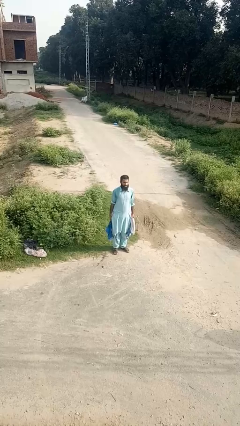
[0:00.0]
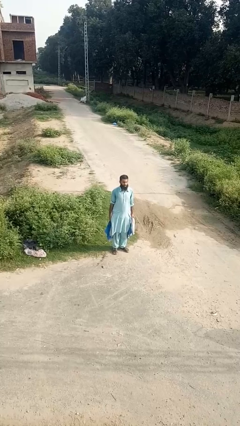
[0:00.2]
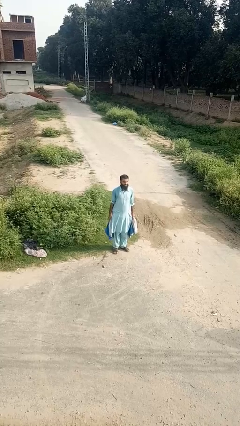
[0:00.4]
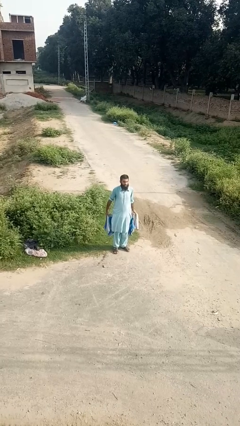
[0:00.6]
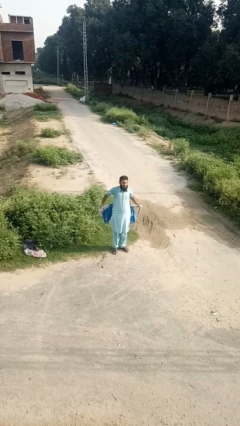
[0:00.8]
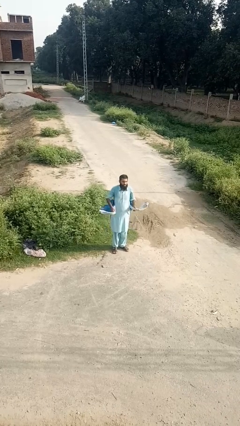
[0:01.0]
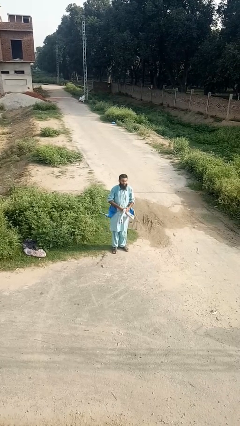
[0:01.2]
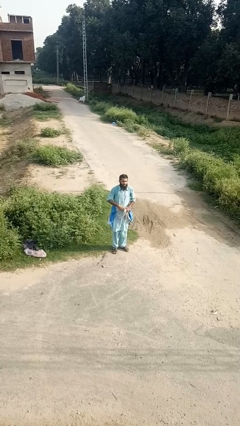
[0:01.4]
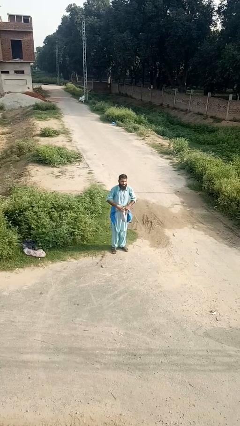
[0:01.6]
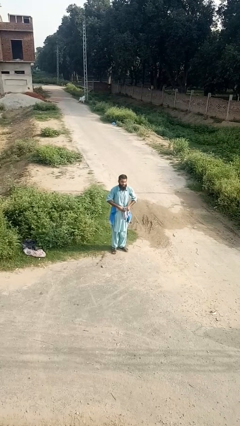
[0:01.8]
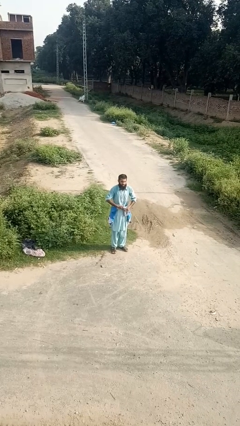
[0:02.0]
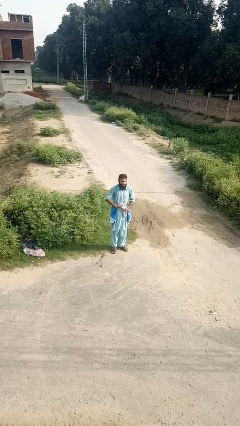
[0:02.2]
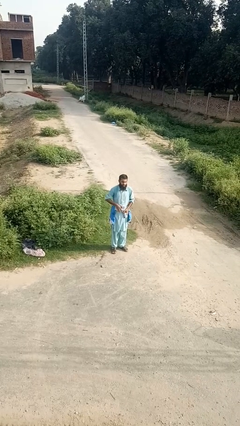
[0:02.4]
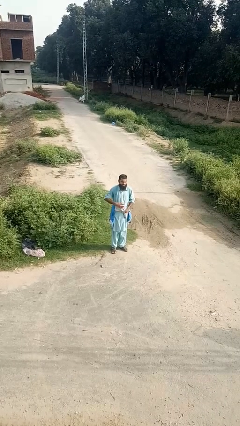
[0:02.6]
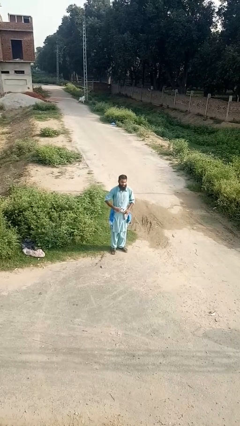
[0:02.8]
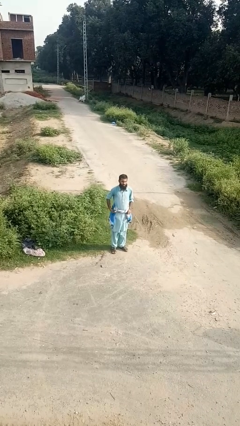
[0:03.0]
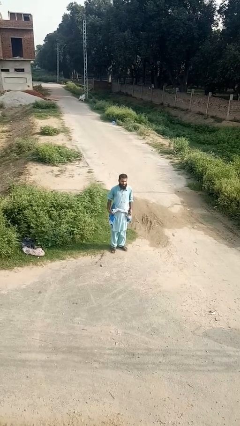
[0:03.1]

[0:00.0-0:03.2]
person ties jacket around waist

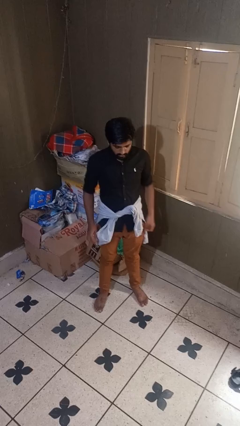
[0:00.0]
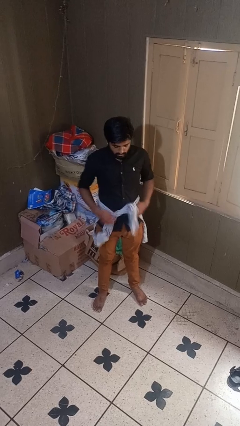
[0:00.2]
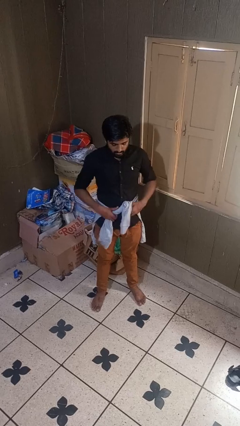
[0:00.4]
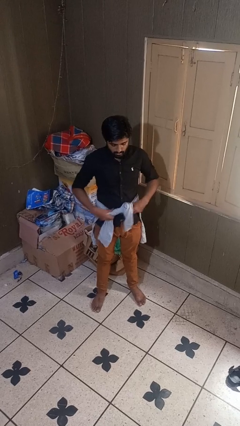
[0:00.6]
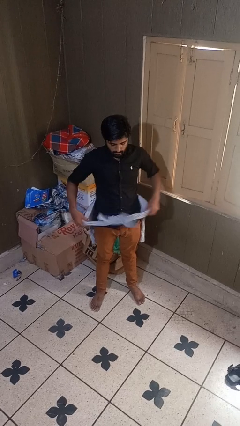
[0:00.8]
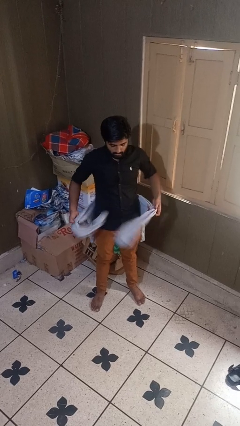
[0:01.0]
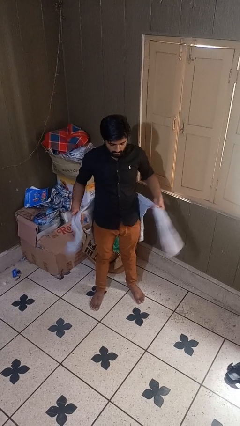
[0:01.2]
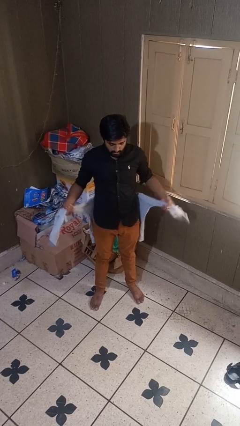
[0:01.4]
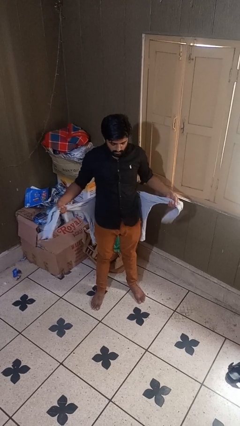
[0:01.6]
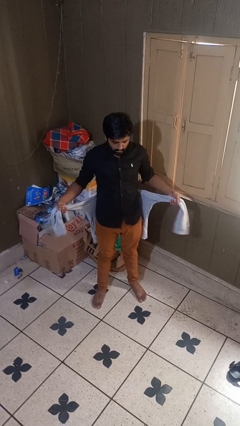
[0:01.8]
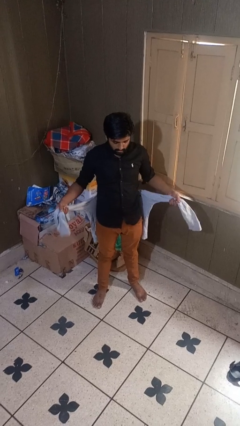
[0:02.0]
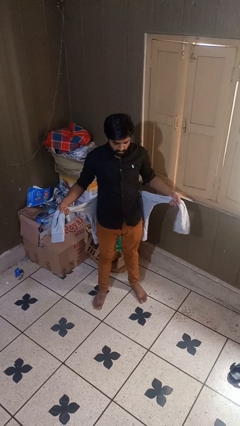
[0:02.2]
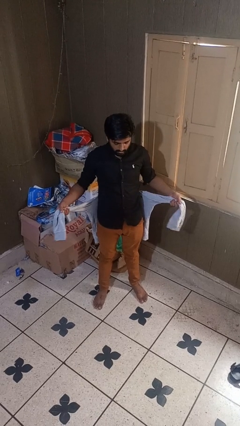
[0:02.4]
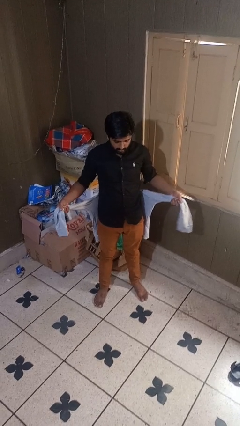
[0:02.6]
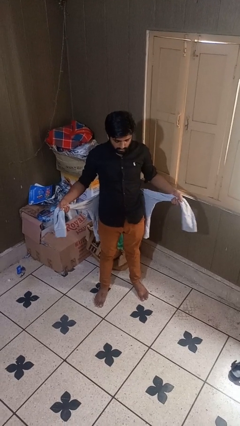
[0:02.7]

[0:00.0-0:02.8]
person unties jacket around waist

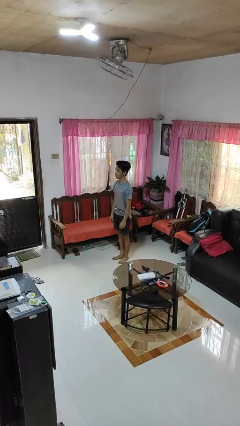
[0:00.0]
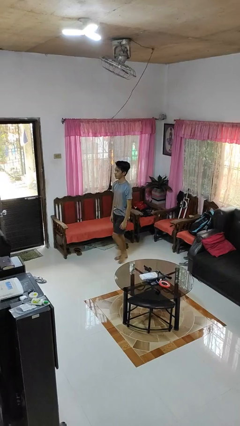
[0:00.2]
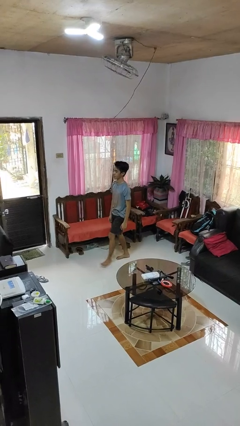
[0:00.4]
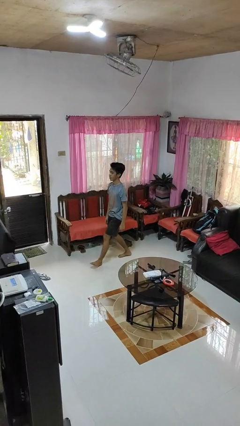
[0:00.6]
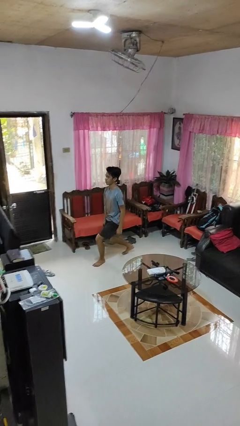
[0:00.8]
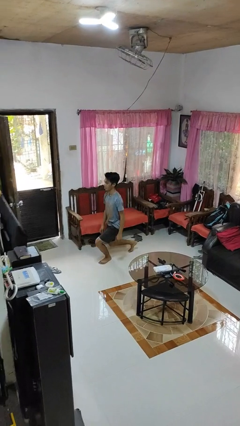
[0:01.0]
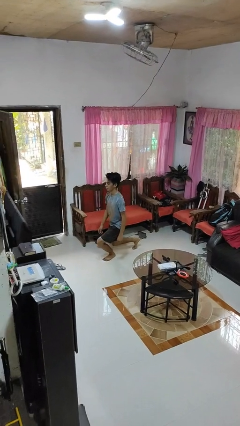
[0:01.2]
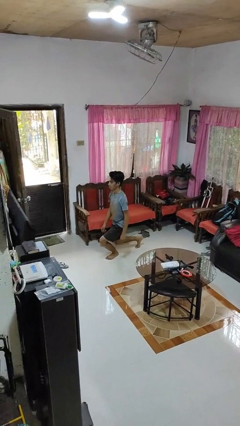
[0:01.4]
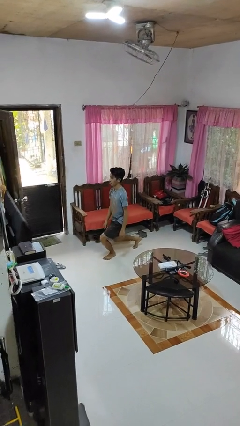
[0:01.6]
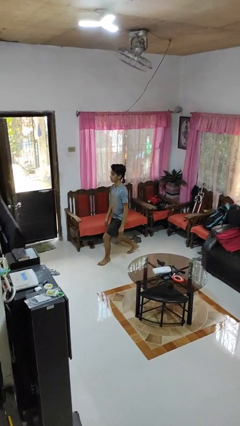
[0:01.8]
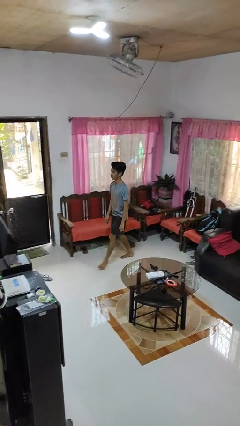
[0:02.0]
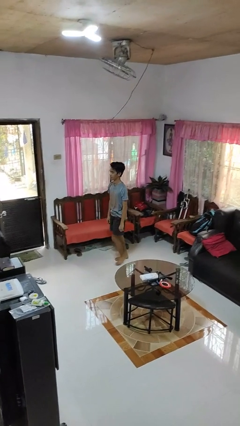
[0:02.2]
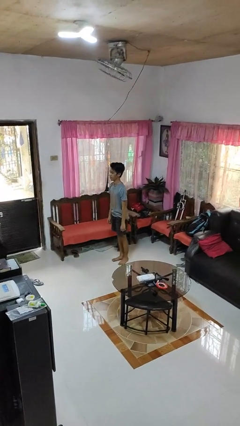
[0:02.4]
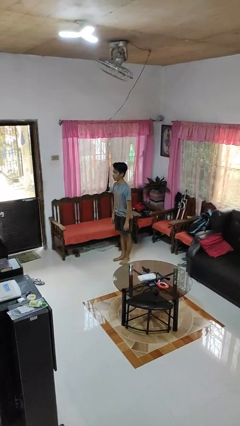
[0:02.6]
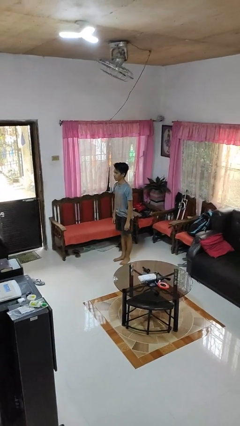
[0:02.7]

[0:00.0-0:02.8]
person exercises with lunges

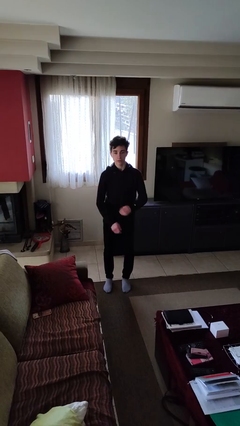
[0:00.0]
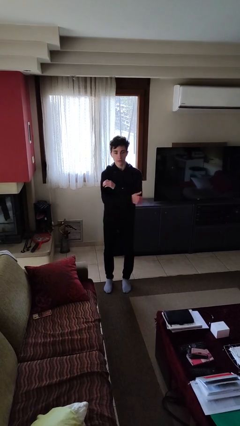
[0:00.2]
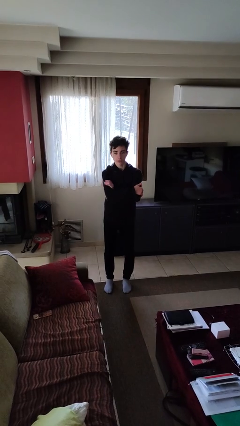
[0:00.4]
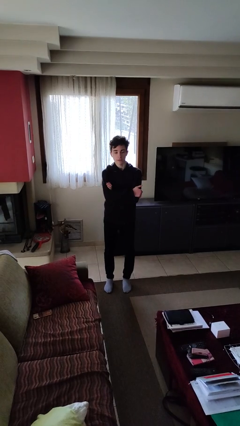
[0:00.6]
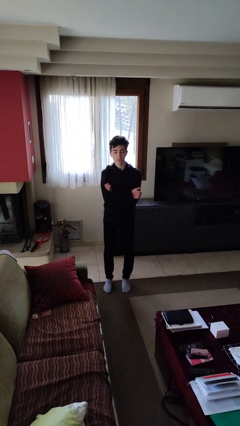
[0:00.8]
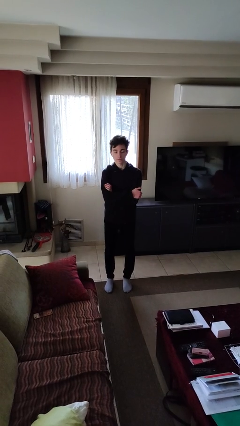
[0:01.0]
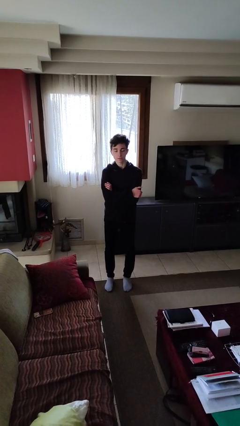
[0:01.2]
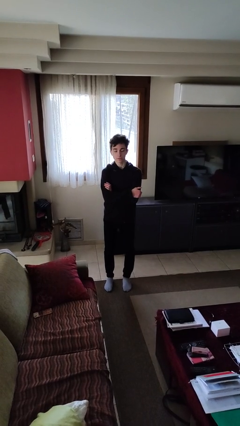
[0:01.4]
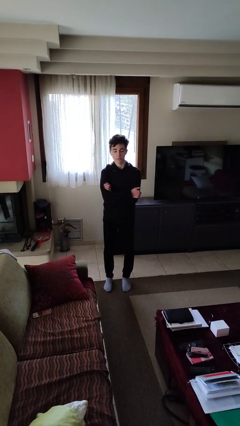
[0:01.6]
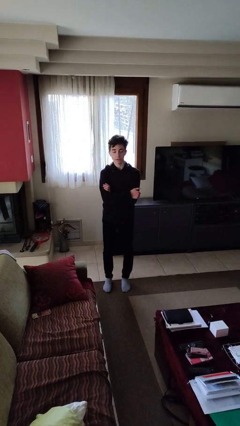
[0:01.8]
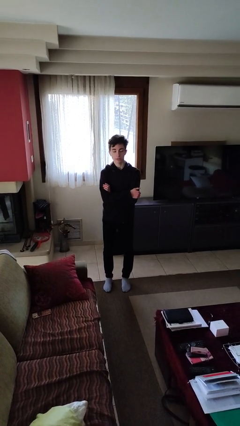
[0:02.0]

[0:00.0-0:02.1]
person crosses arms

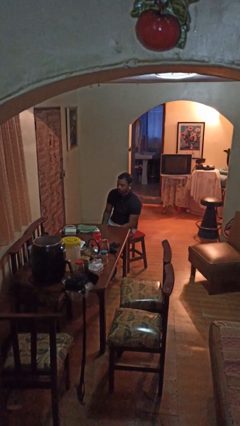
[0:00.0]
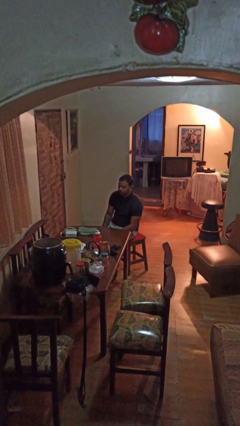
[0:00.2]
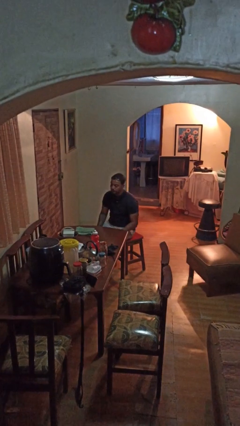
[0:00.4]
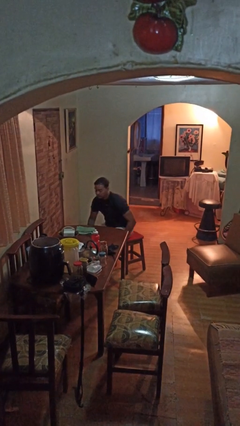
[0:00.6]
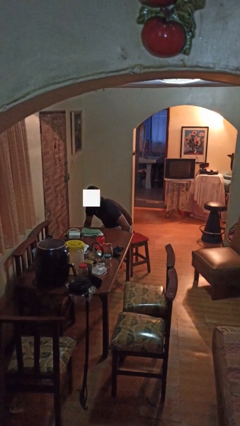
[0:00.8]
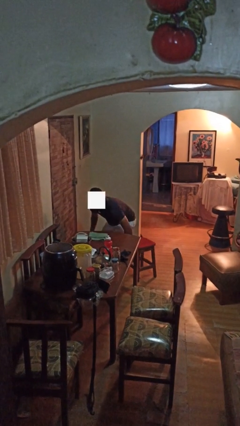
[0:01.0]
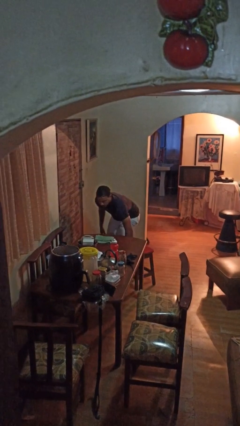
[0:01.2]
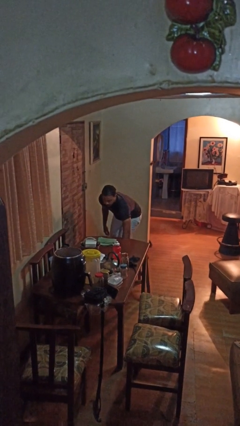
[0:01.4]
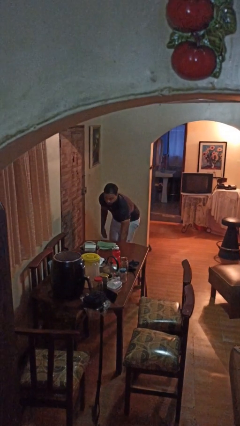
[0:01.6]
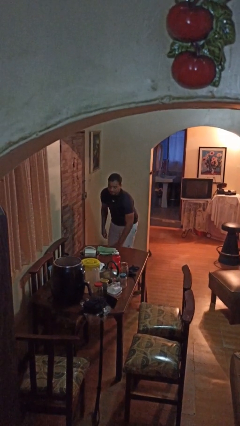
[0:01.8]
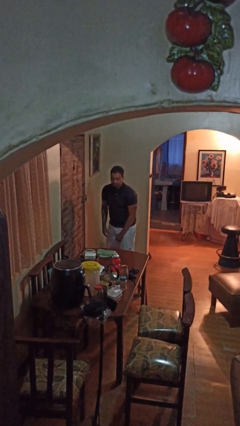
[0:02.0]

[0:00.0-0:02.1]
person stands up

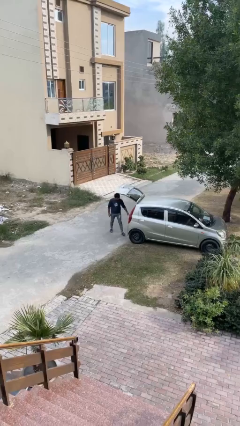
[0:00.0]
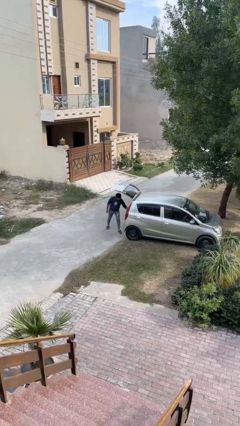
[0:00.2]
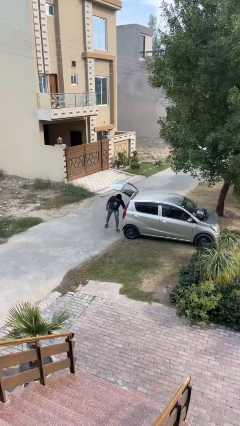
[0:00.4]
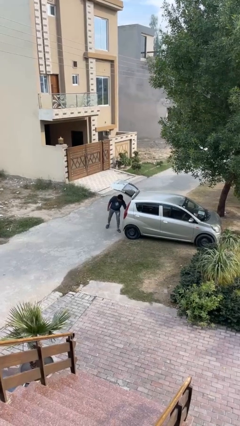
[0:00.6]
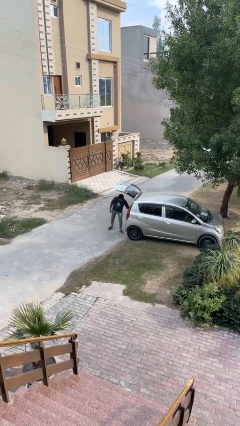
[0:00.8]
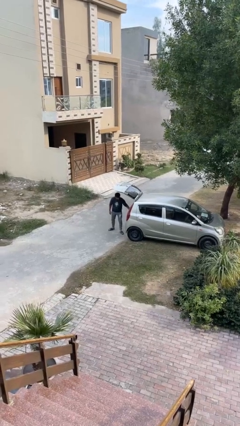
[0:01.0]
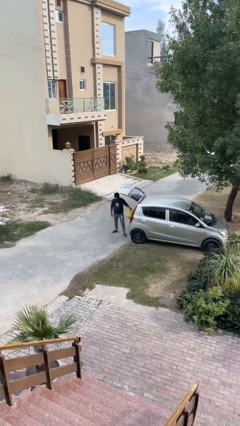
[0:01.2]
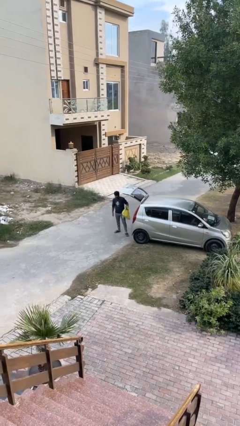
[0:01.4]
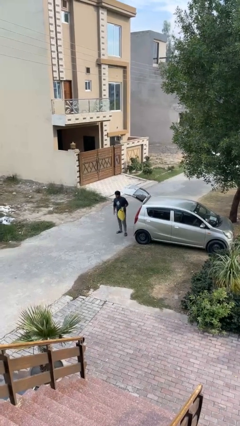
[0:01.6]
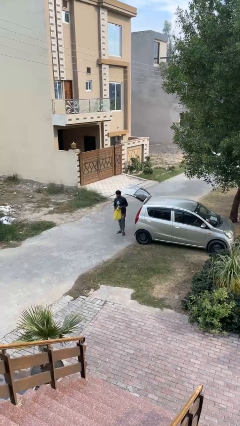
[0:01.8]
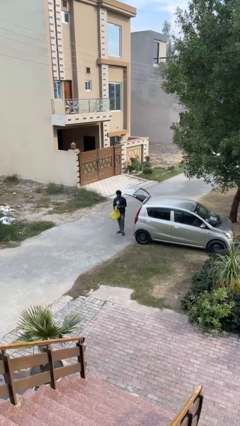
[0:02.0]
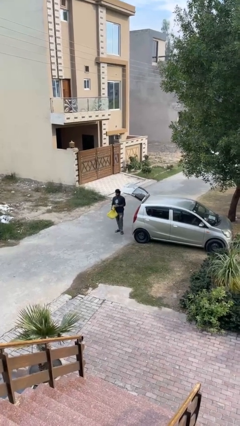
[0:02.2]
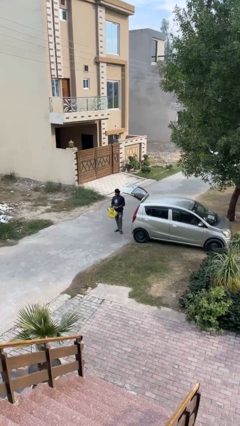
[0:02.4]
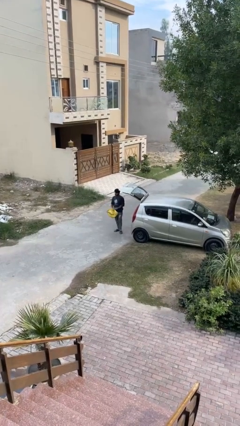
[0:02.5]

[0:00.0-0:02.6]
person unloads car

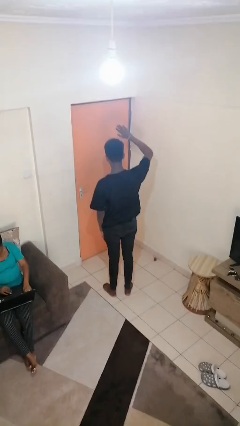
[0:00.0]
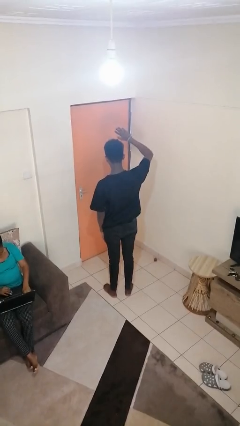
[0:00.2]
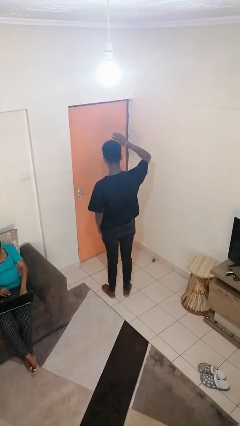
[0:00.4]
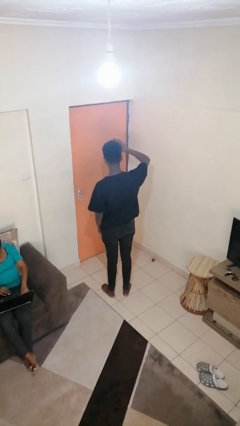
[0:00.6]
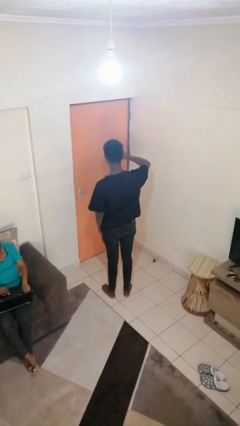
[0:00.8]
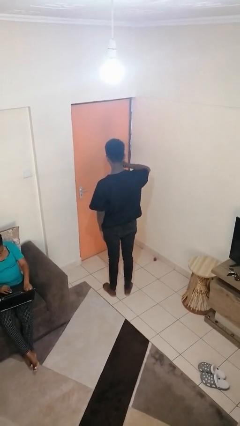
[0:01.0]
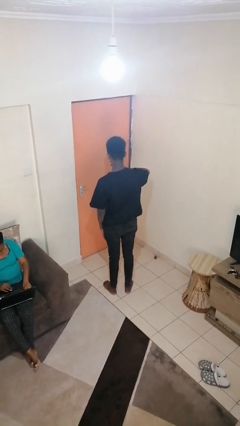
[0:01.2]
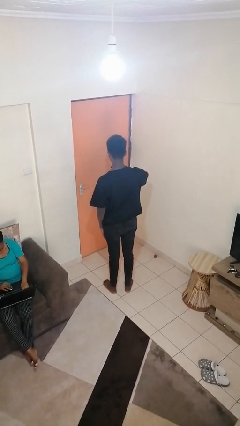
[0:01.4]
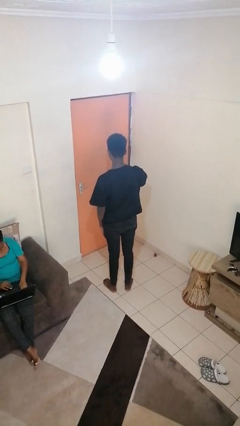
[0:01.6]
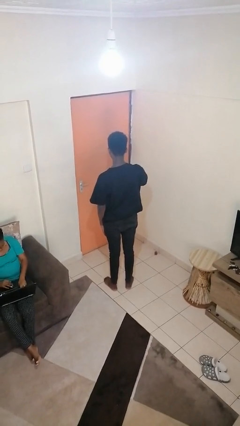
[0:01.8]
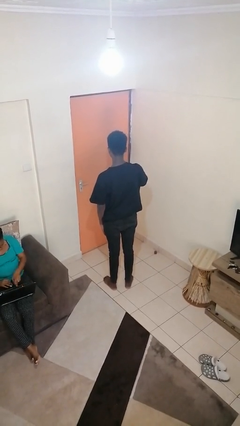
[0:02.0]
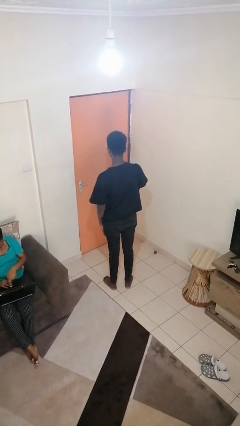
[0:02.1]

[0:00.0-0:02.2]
person gestures swipe down
